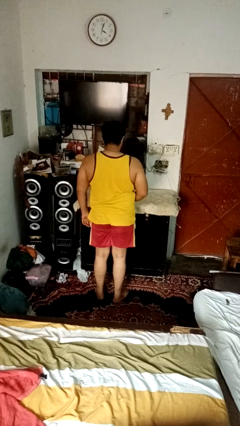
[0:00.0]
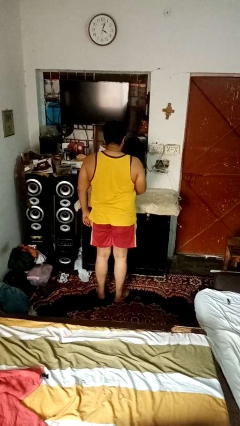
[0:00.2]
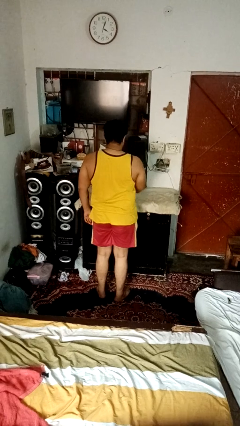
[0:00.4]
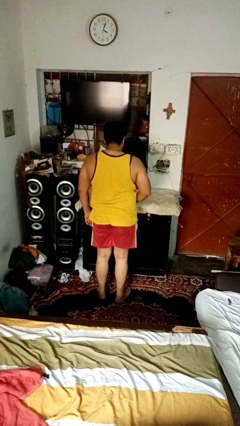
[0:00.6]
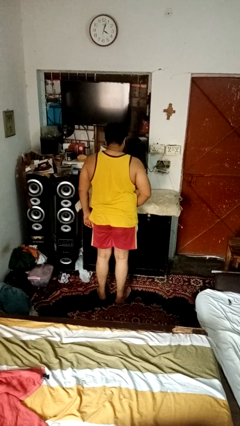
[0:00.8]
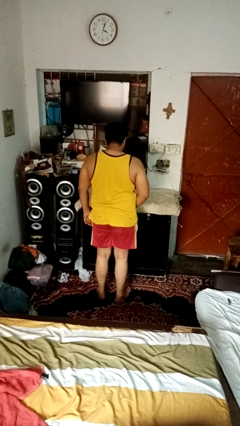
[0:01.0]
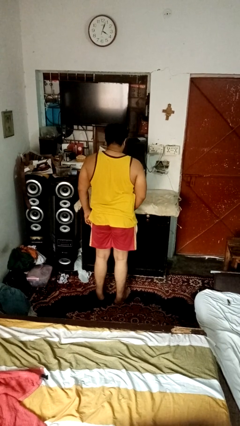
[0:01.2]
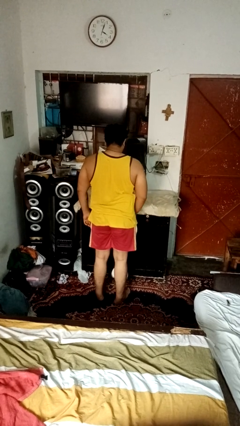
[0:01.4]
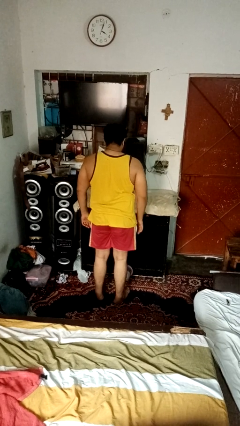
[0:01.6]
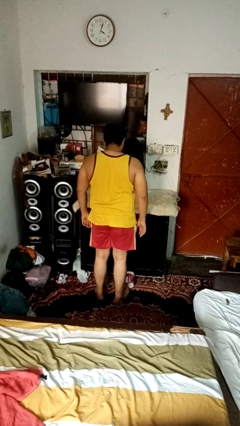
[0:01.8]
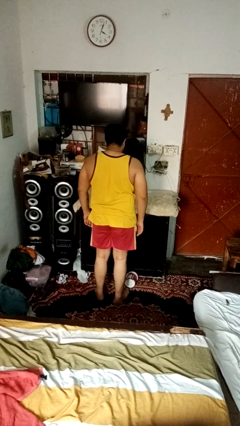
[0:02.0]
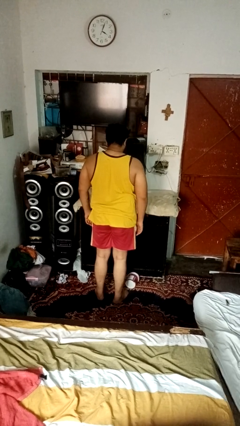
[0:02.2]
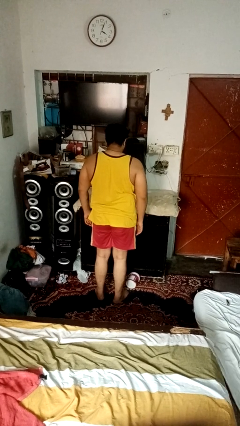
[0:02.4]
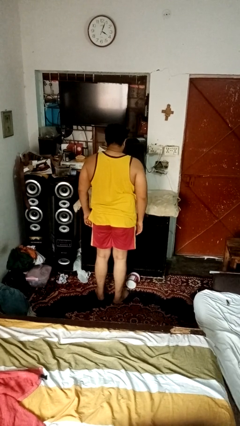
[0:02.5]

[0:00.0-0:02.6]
person knocks over furniture

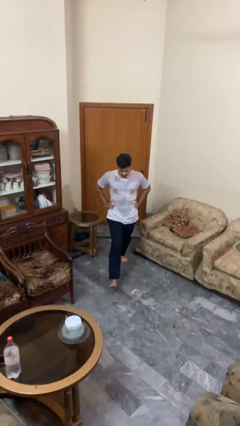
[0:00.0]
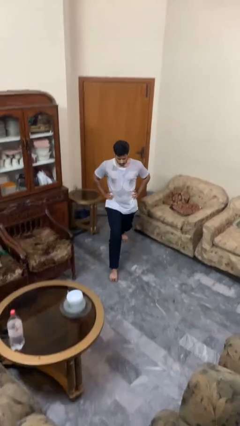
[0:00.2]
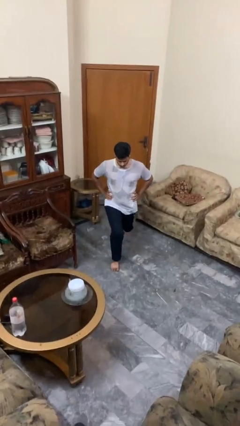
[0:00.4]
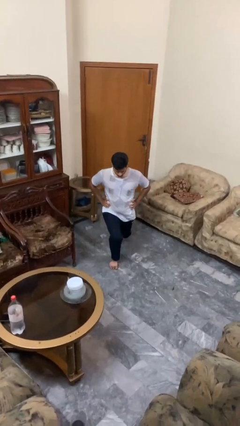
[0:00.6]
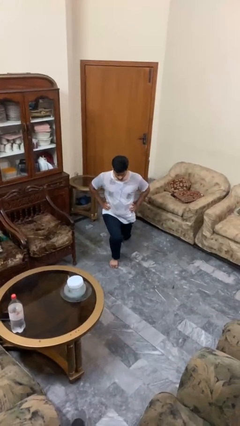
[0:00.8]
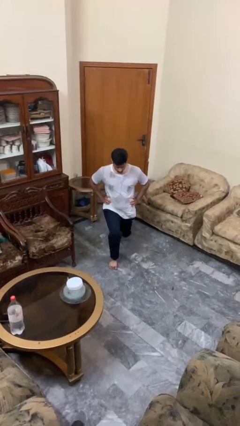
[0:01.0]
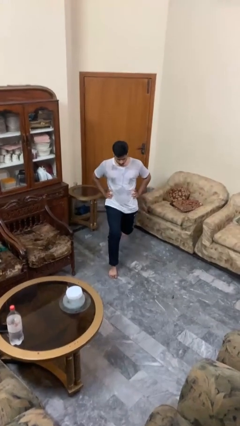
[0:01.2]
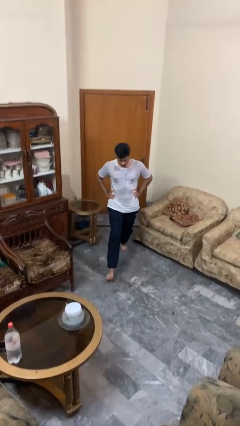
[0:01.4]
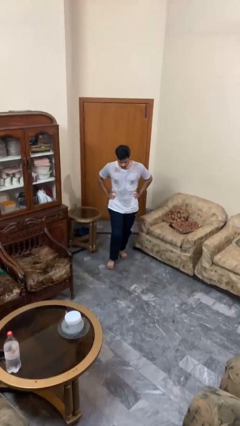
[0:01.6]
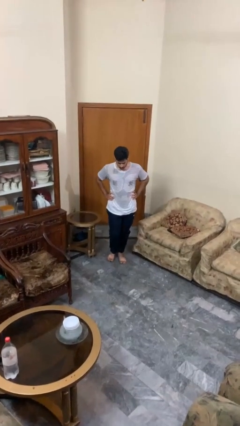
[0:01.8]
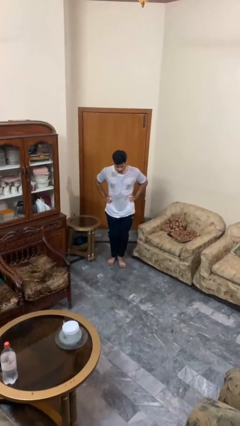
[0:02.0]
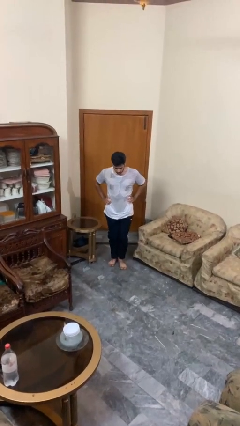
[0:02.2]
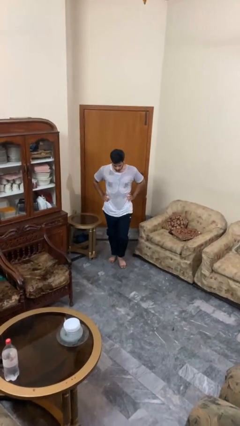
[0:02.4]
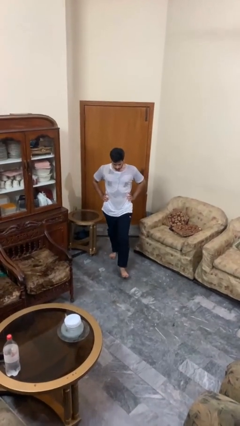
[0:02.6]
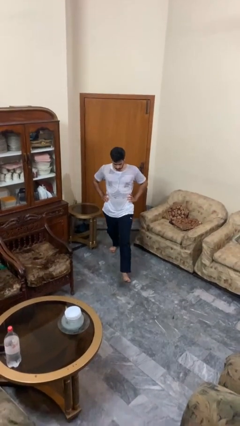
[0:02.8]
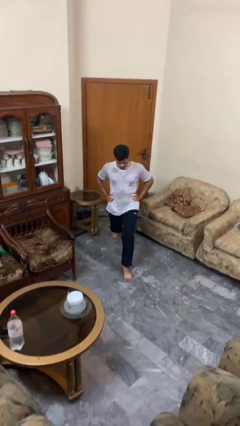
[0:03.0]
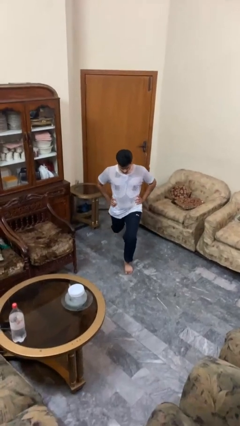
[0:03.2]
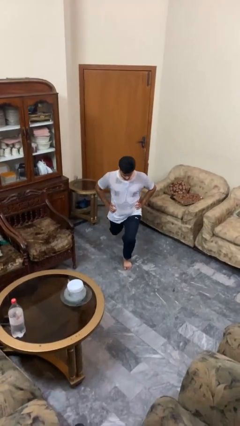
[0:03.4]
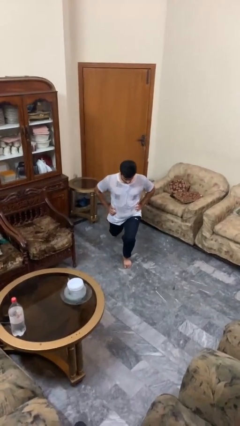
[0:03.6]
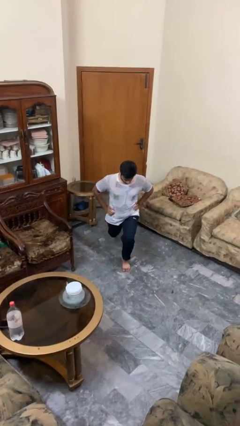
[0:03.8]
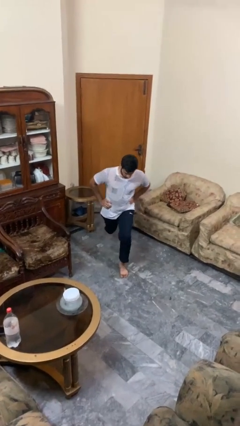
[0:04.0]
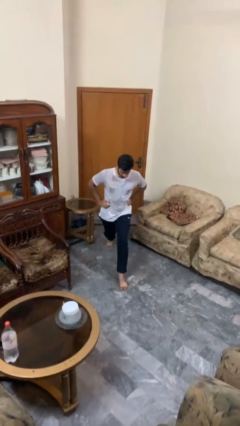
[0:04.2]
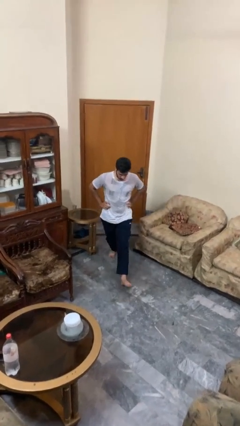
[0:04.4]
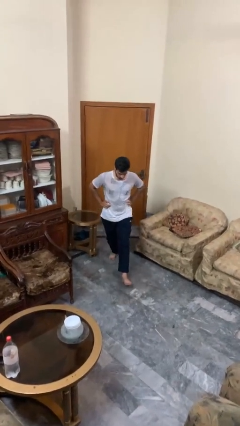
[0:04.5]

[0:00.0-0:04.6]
person exercises with lunges

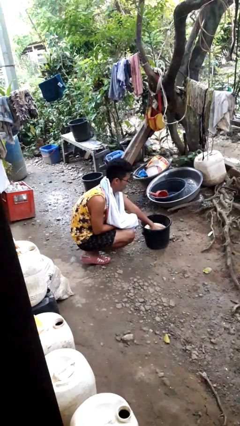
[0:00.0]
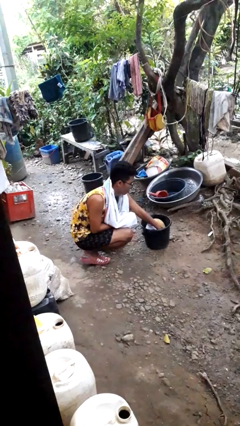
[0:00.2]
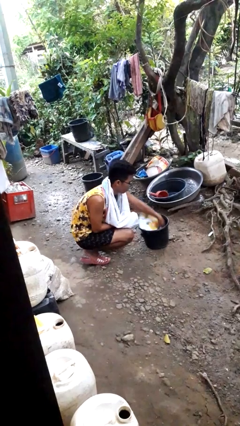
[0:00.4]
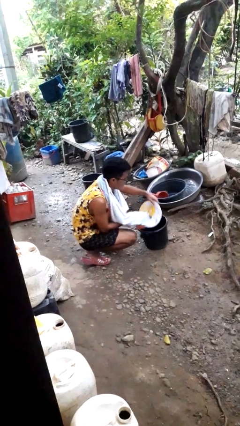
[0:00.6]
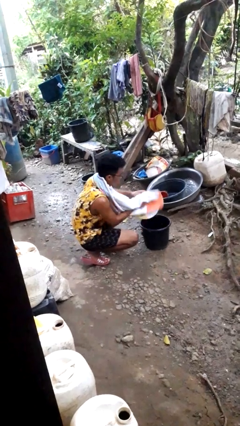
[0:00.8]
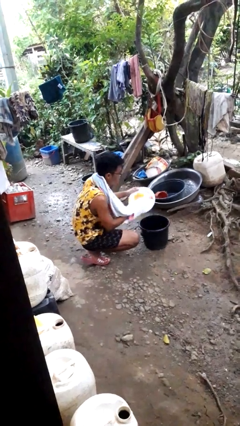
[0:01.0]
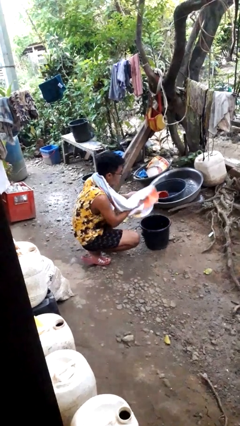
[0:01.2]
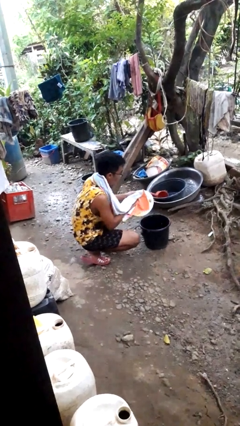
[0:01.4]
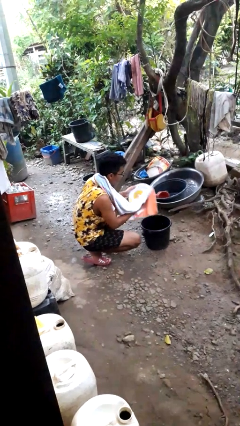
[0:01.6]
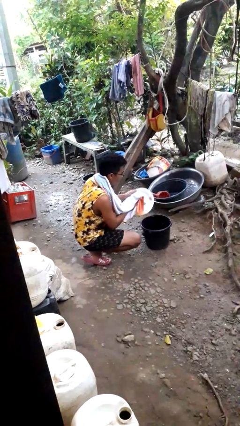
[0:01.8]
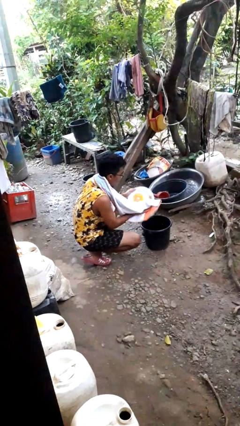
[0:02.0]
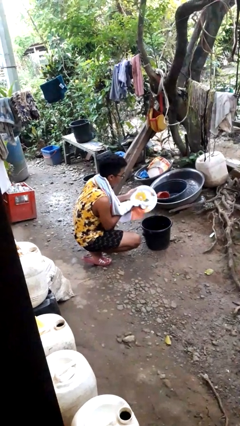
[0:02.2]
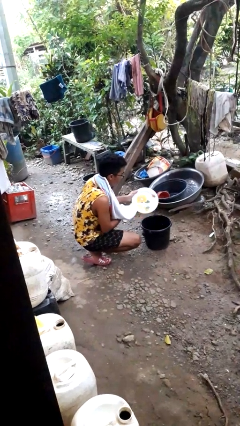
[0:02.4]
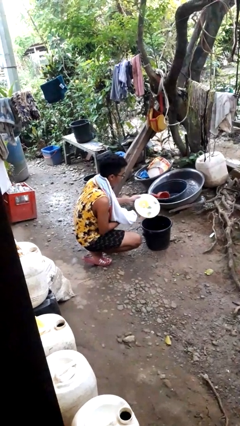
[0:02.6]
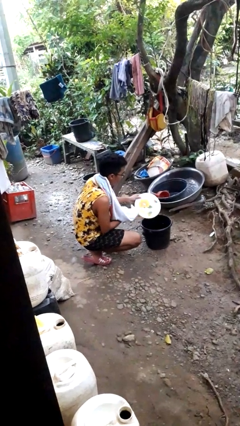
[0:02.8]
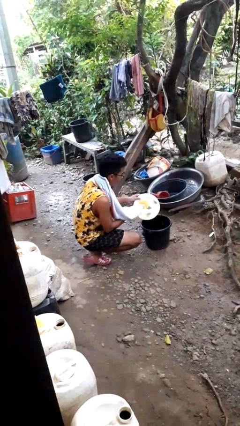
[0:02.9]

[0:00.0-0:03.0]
person dries dish

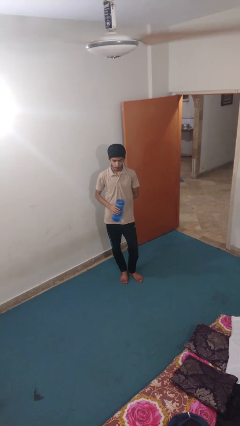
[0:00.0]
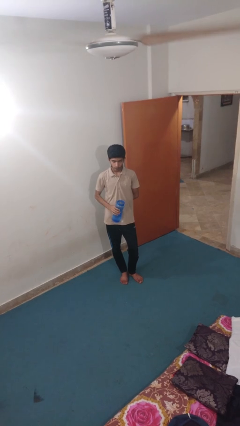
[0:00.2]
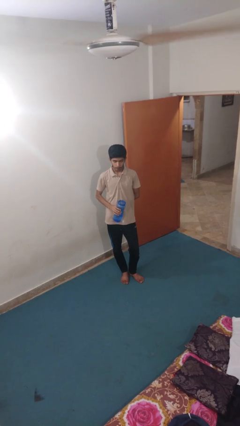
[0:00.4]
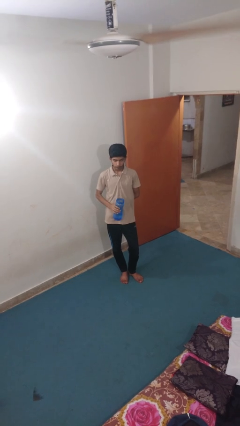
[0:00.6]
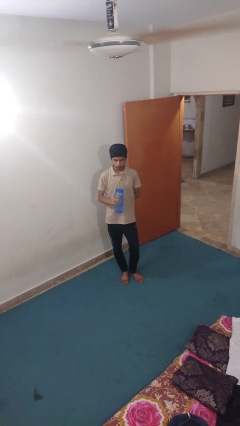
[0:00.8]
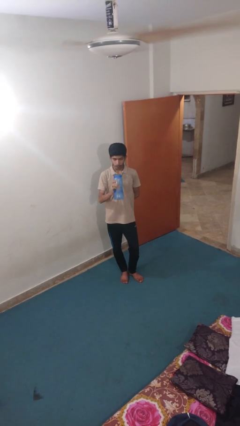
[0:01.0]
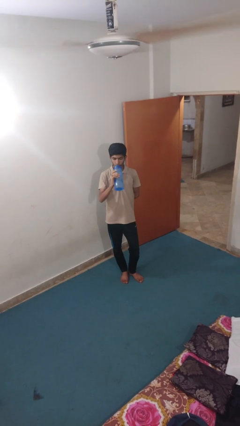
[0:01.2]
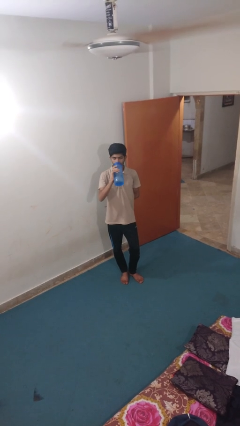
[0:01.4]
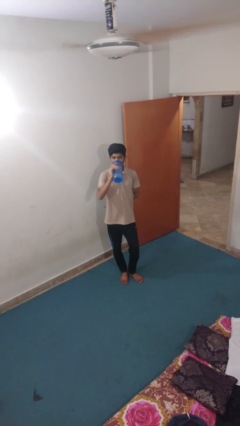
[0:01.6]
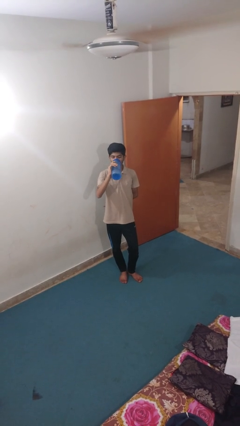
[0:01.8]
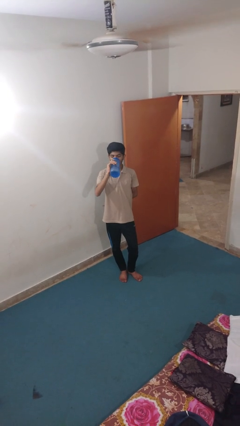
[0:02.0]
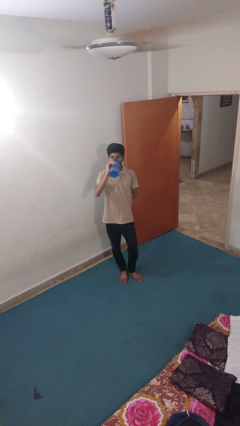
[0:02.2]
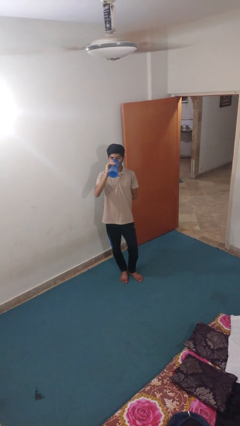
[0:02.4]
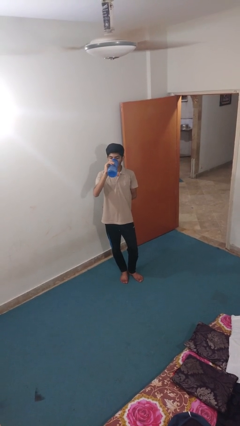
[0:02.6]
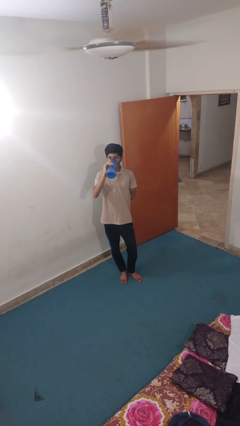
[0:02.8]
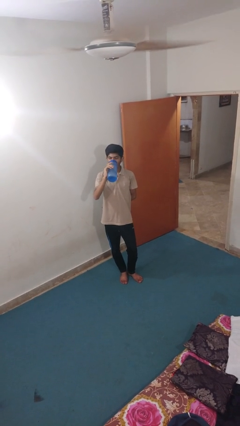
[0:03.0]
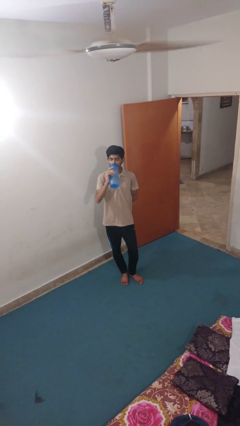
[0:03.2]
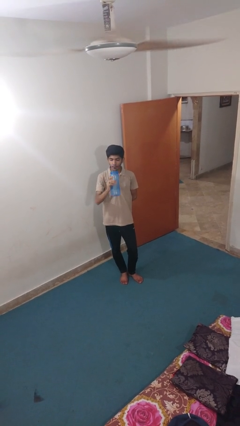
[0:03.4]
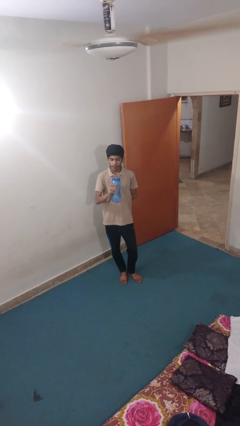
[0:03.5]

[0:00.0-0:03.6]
person drinks from bottle

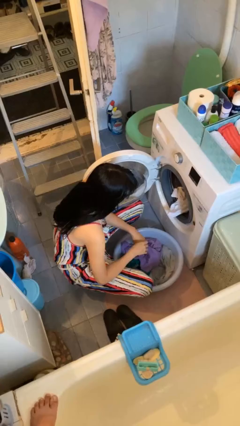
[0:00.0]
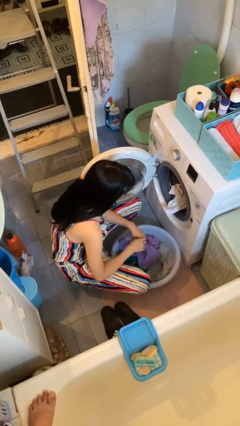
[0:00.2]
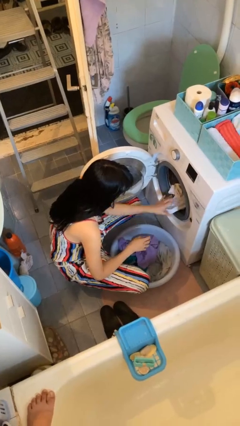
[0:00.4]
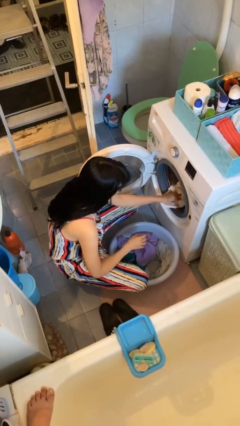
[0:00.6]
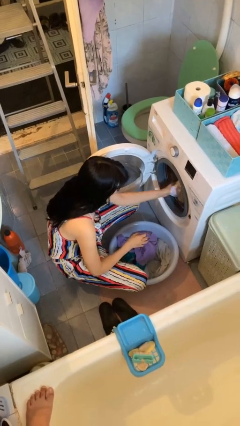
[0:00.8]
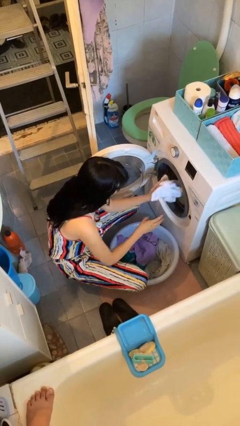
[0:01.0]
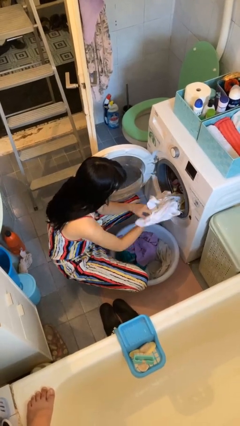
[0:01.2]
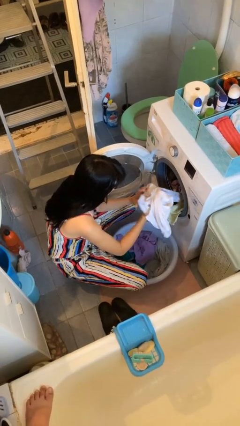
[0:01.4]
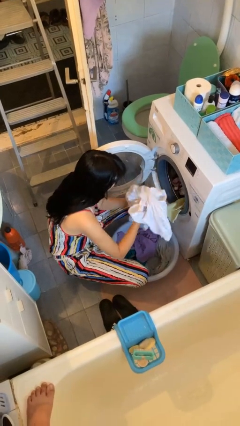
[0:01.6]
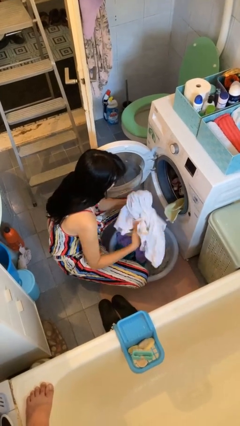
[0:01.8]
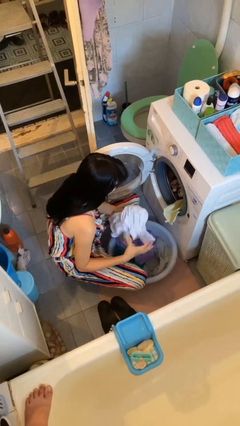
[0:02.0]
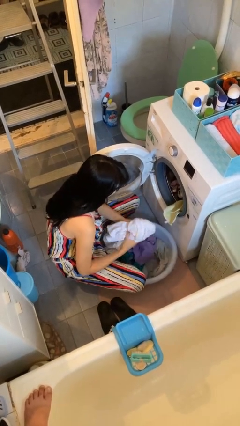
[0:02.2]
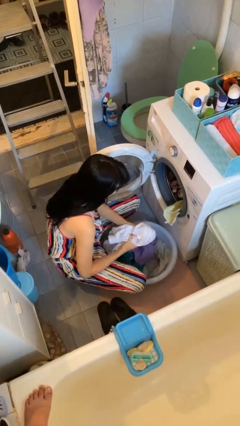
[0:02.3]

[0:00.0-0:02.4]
person loads clotheswasher

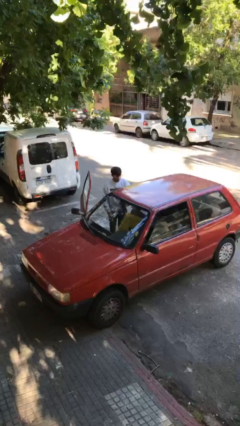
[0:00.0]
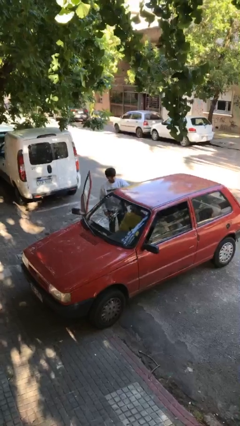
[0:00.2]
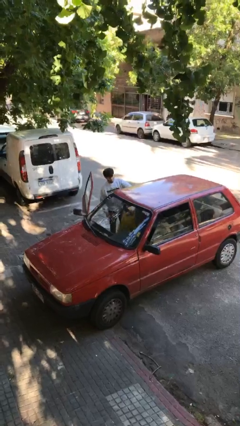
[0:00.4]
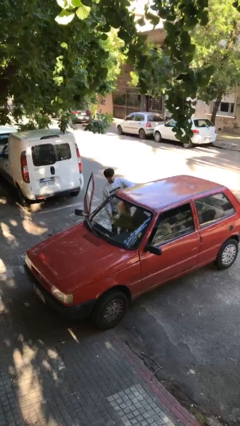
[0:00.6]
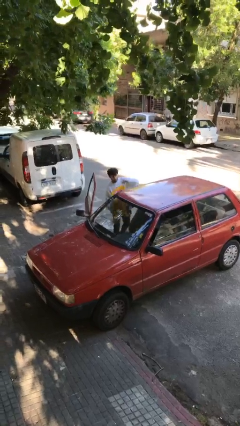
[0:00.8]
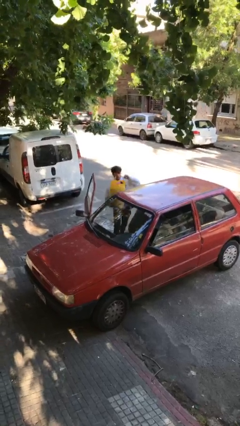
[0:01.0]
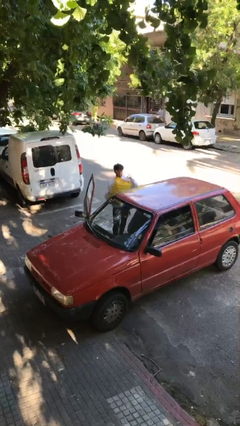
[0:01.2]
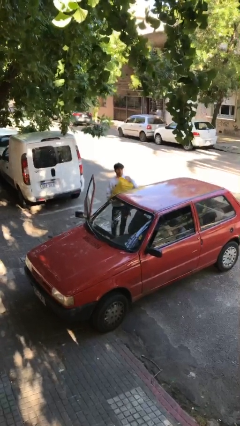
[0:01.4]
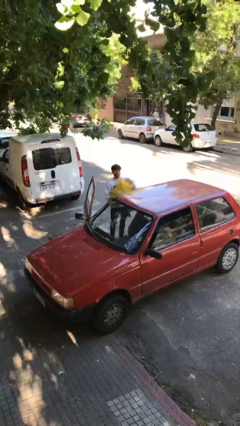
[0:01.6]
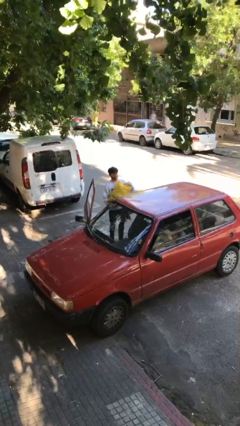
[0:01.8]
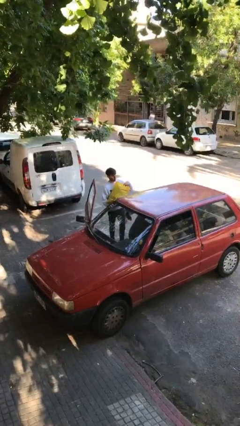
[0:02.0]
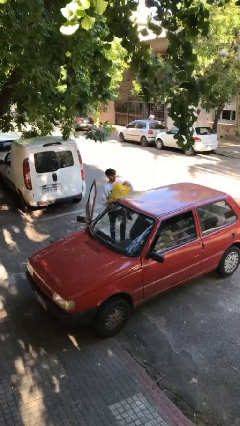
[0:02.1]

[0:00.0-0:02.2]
person unloads car
